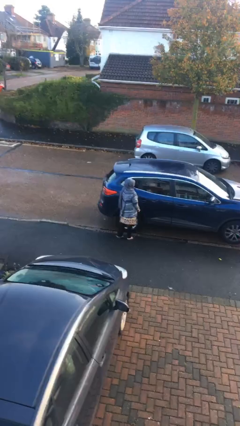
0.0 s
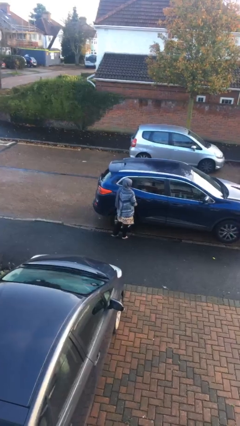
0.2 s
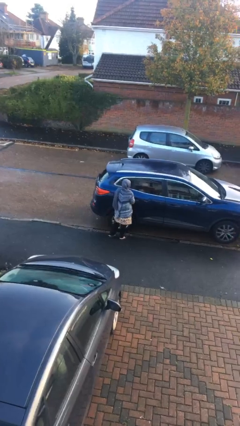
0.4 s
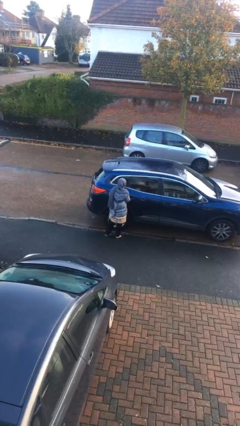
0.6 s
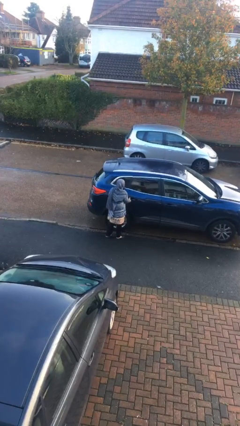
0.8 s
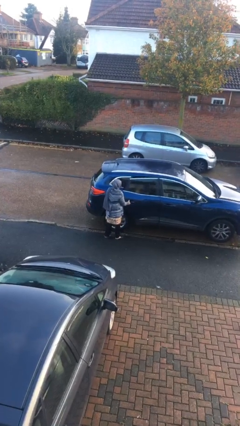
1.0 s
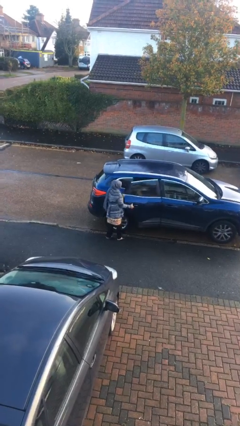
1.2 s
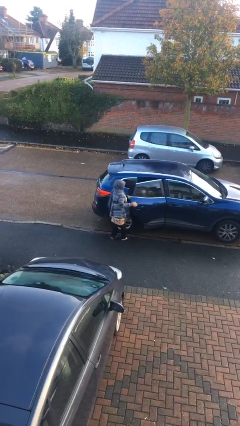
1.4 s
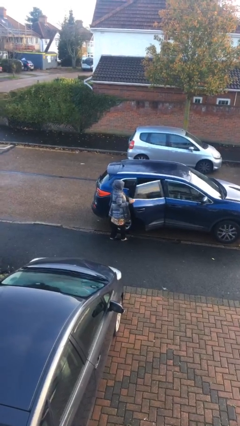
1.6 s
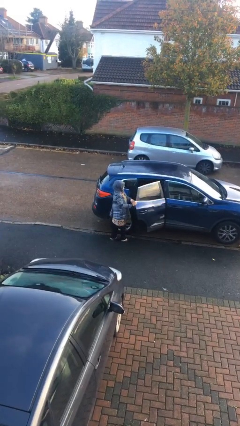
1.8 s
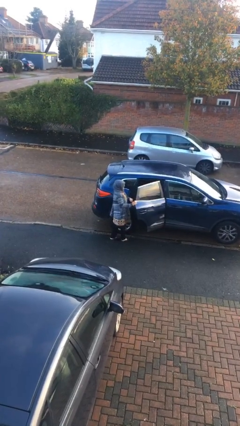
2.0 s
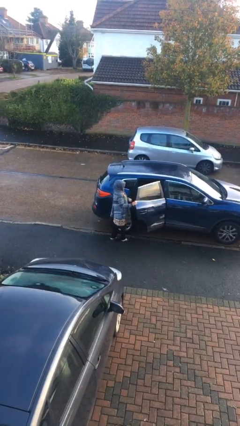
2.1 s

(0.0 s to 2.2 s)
person opens car door

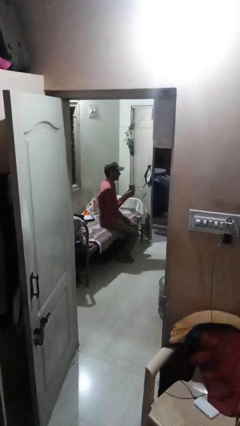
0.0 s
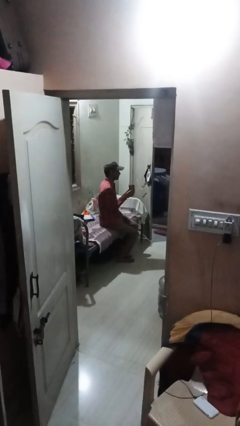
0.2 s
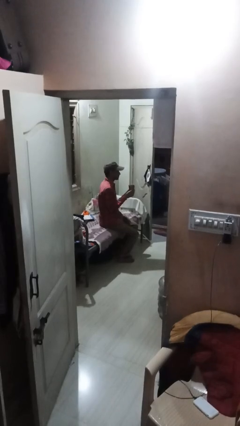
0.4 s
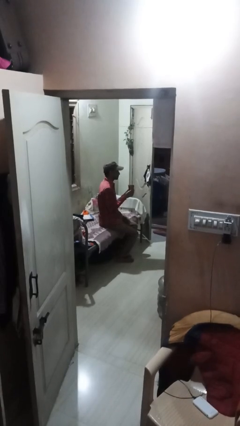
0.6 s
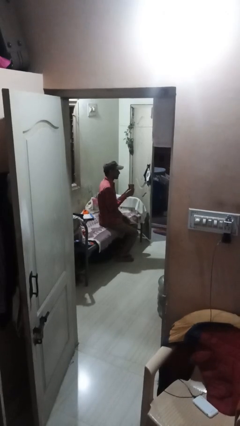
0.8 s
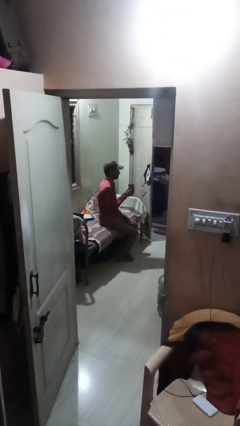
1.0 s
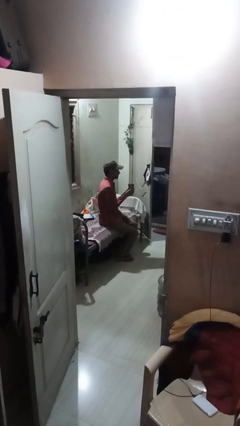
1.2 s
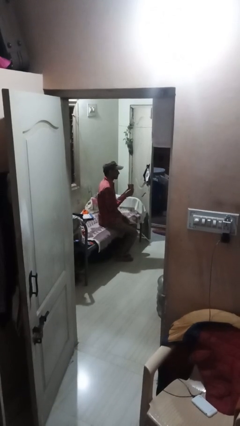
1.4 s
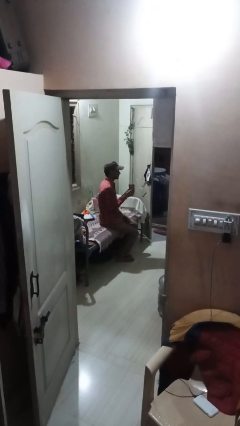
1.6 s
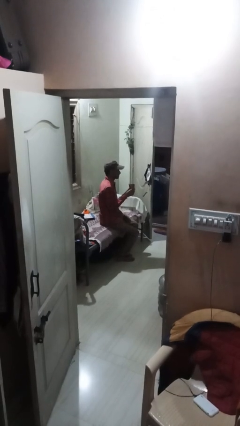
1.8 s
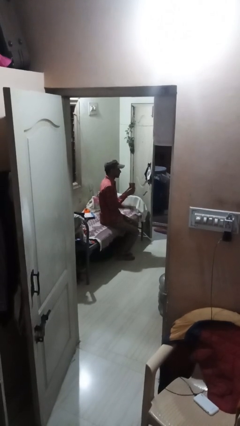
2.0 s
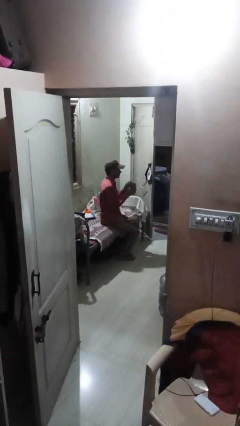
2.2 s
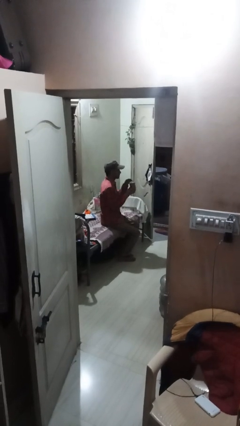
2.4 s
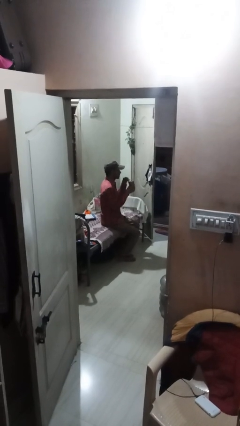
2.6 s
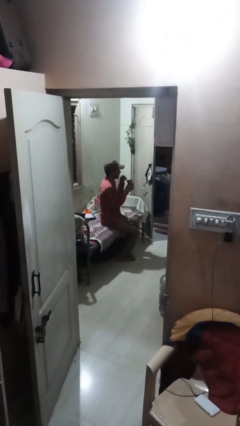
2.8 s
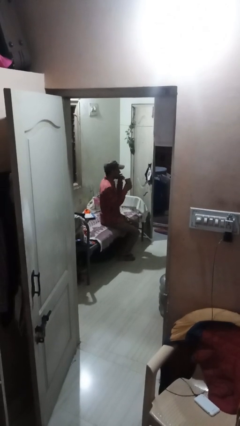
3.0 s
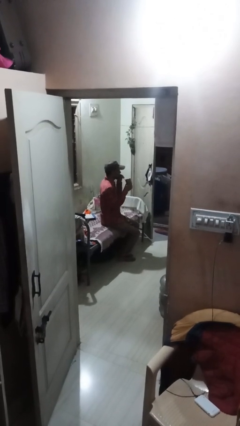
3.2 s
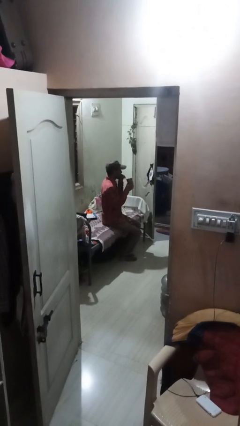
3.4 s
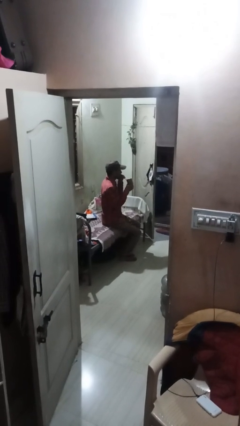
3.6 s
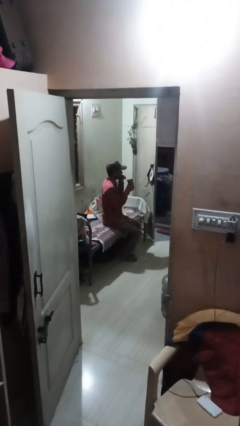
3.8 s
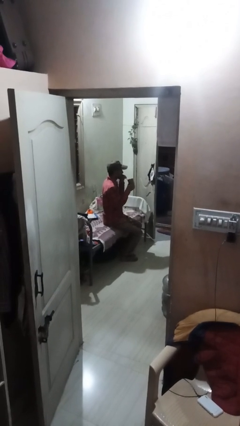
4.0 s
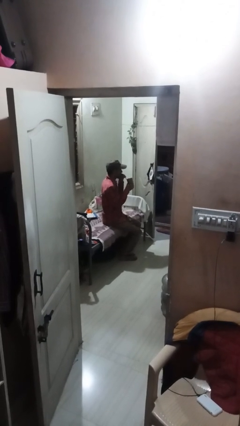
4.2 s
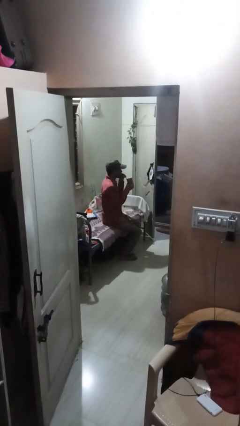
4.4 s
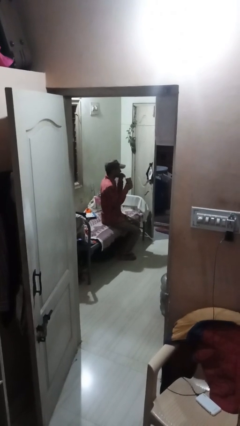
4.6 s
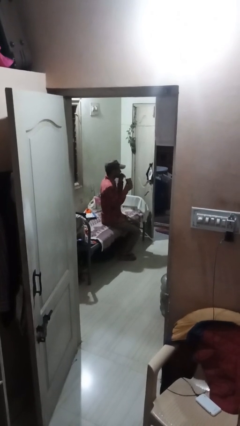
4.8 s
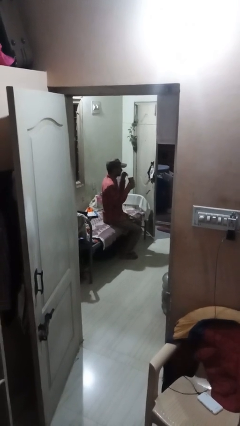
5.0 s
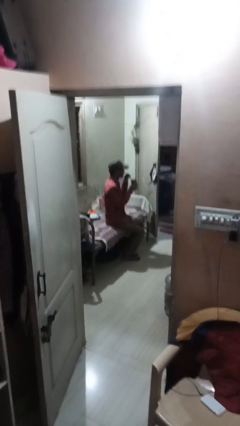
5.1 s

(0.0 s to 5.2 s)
person drinks from straw

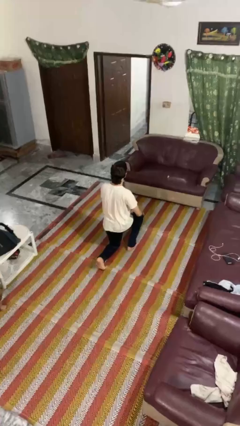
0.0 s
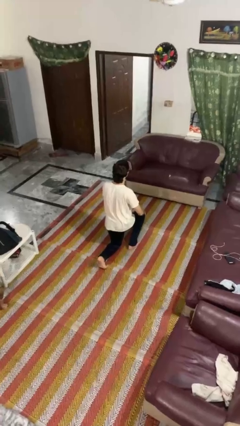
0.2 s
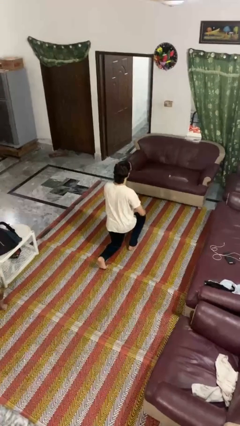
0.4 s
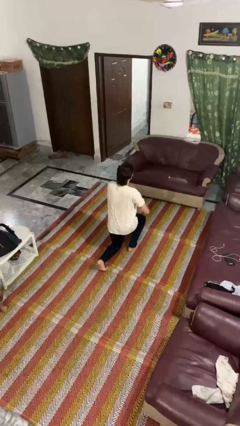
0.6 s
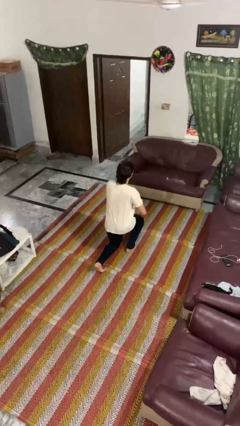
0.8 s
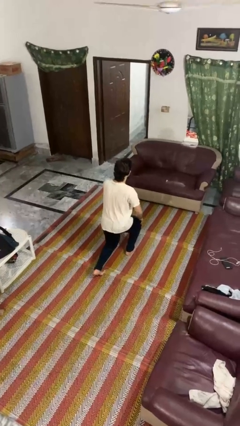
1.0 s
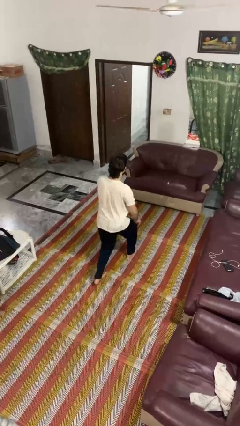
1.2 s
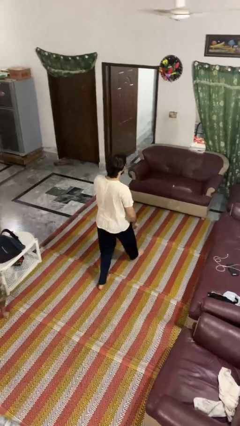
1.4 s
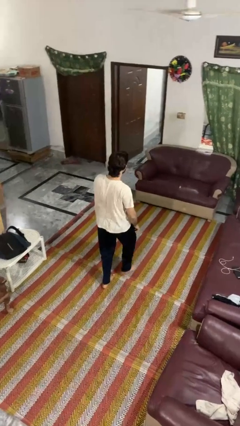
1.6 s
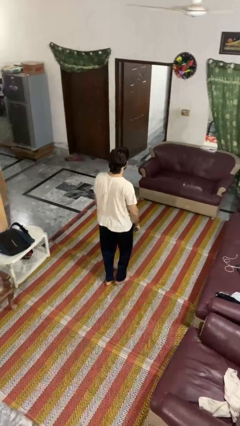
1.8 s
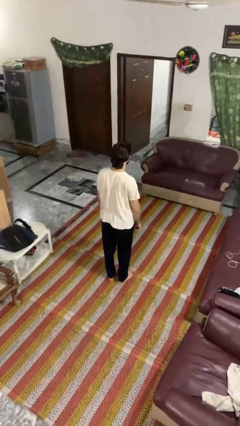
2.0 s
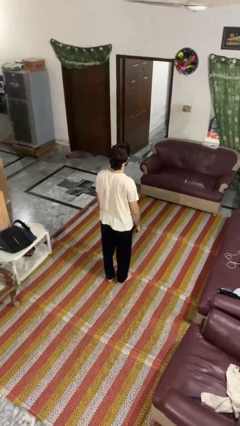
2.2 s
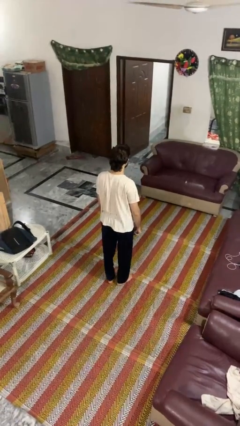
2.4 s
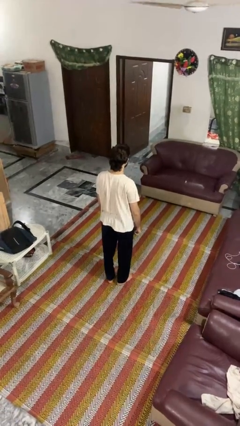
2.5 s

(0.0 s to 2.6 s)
person stands up from floor

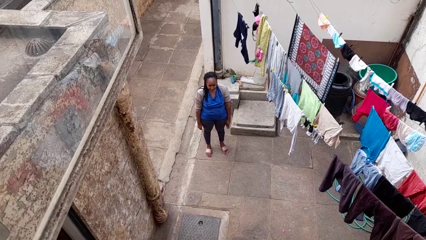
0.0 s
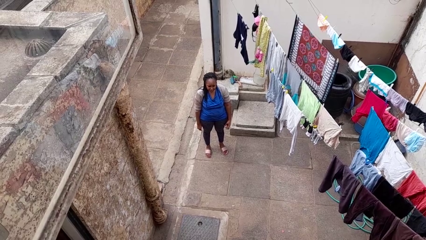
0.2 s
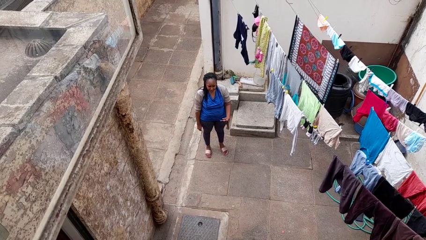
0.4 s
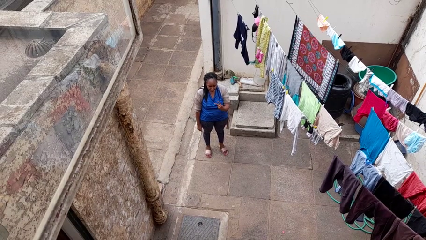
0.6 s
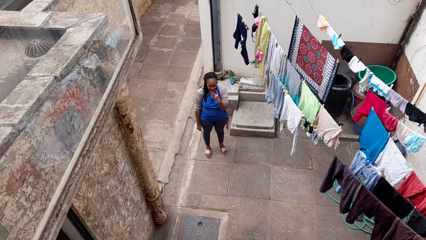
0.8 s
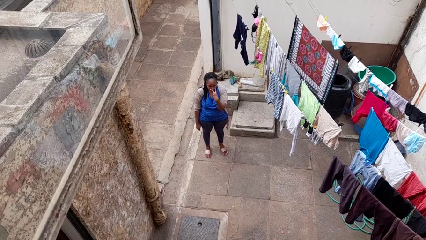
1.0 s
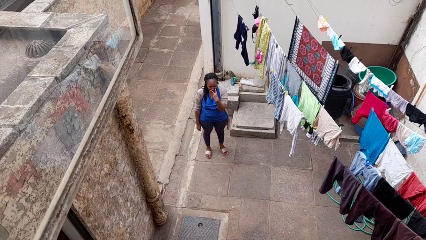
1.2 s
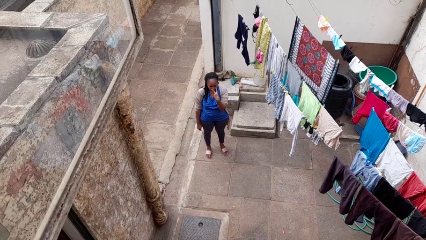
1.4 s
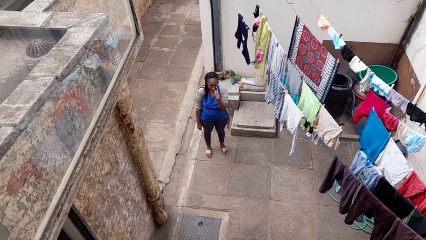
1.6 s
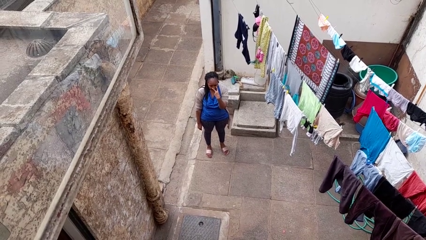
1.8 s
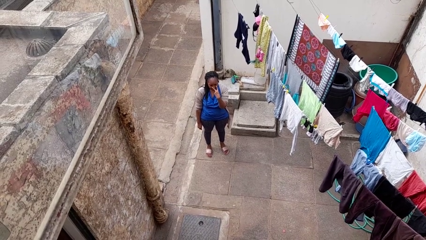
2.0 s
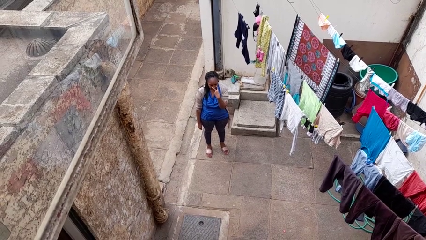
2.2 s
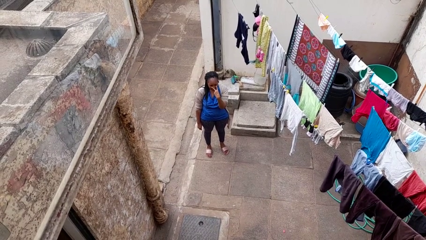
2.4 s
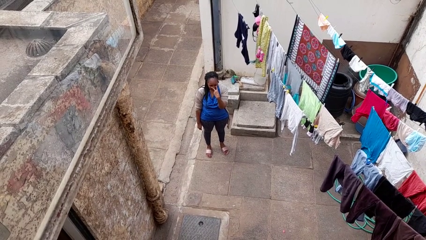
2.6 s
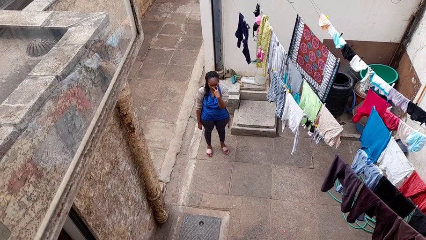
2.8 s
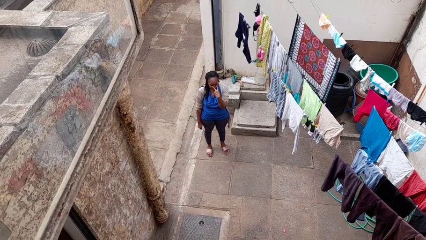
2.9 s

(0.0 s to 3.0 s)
person gestures watch closely

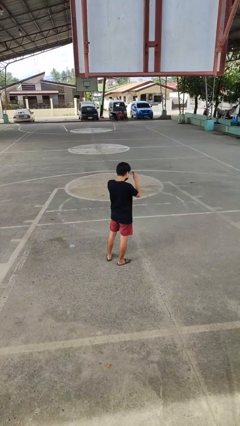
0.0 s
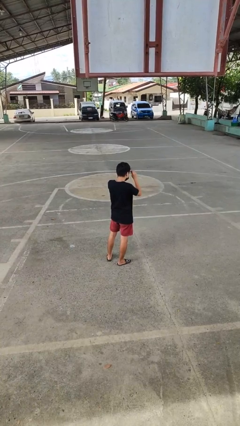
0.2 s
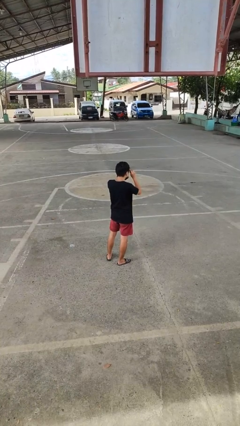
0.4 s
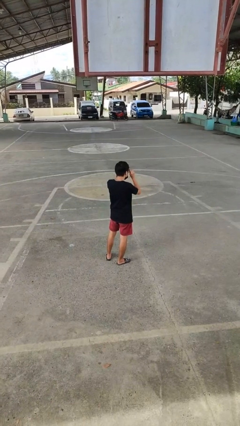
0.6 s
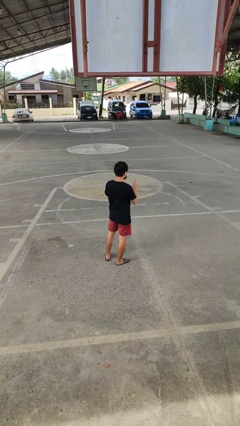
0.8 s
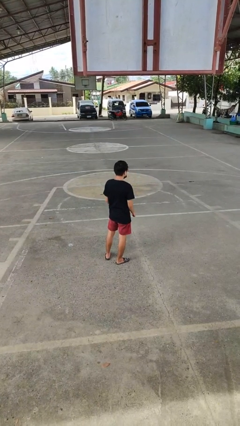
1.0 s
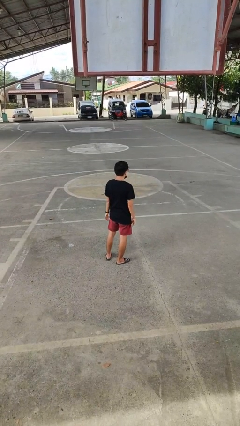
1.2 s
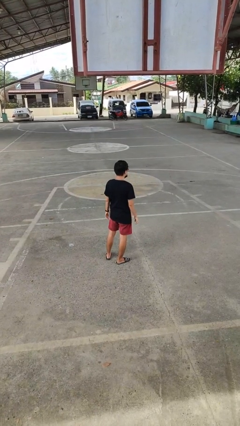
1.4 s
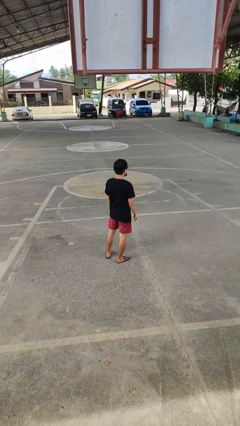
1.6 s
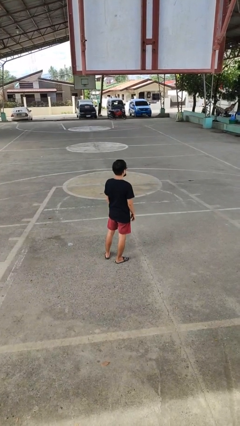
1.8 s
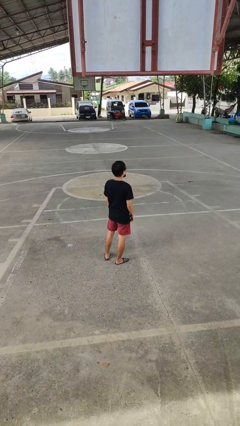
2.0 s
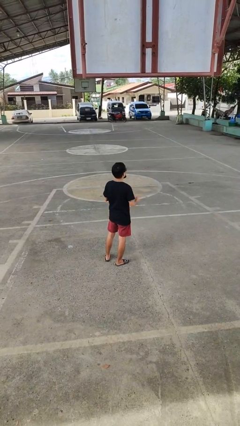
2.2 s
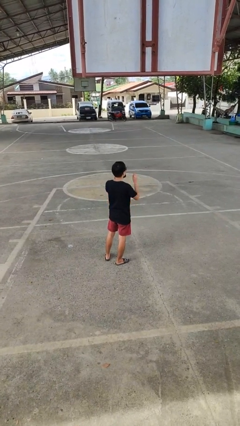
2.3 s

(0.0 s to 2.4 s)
person puts on glasses

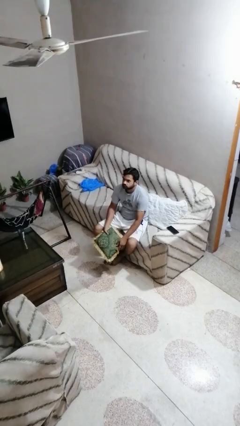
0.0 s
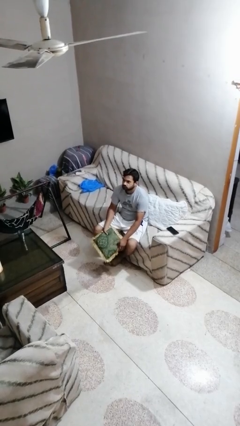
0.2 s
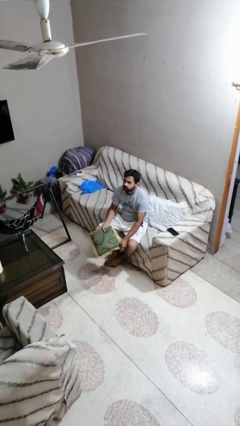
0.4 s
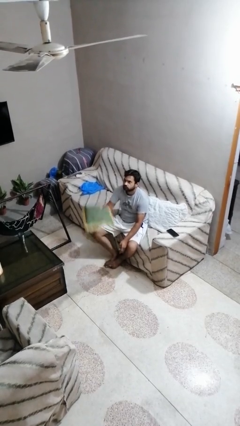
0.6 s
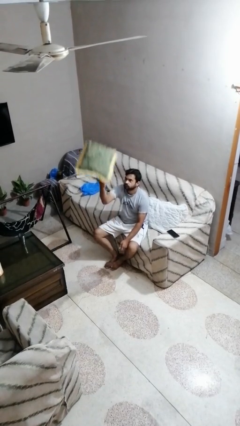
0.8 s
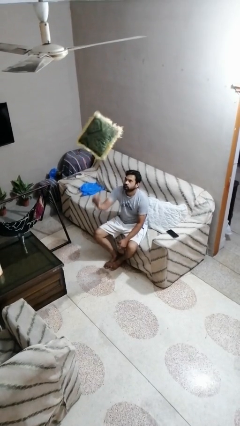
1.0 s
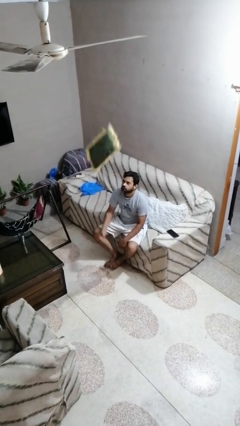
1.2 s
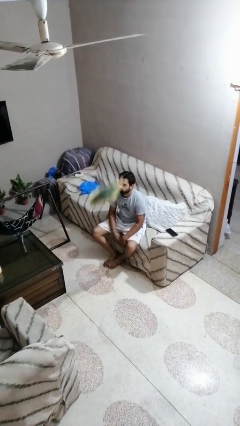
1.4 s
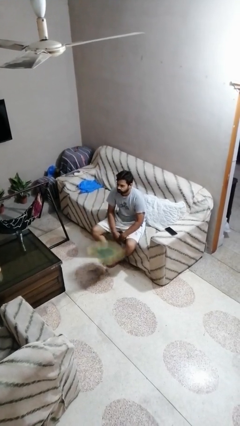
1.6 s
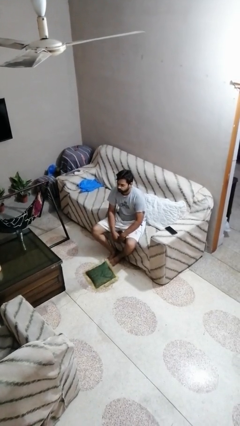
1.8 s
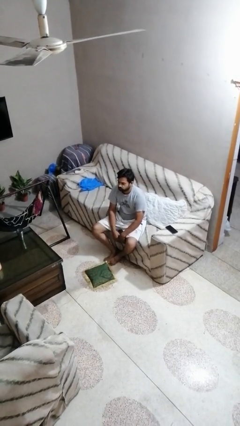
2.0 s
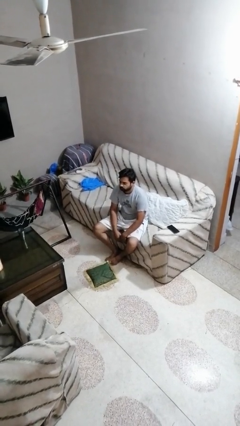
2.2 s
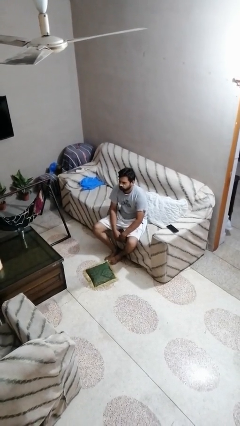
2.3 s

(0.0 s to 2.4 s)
person throws object into air
